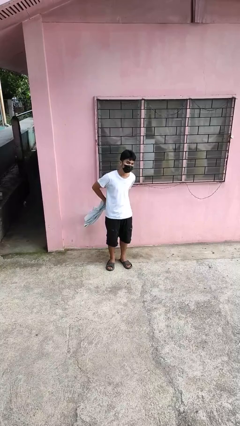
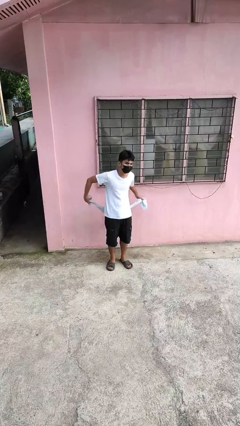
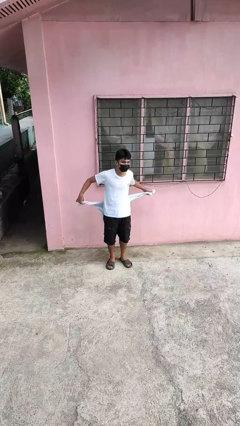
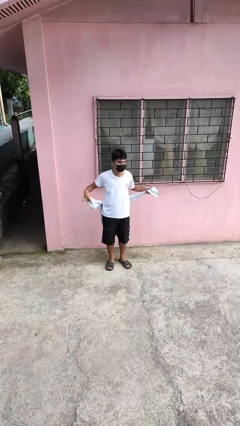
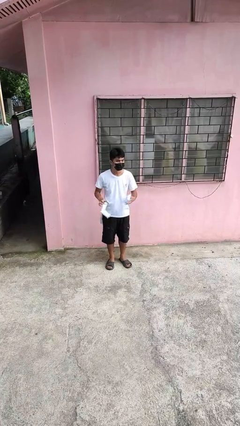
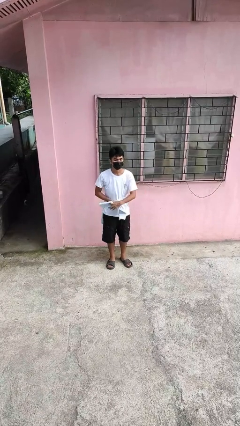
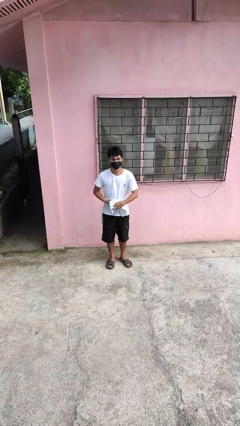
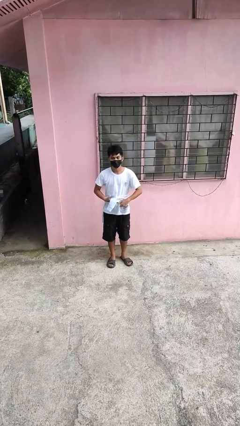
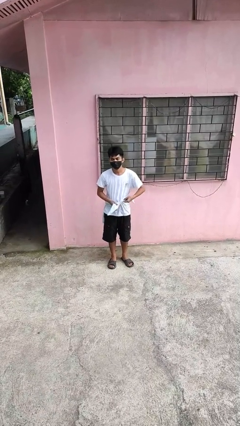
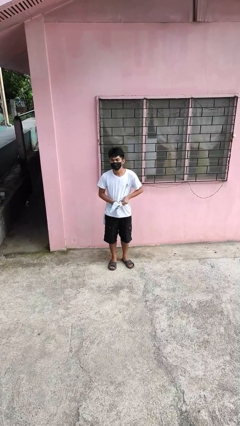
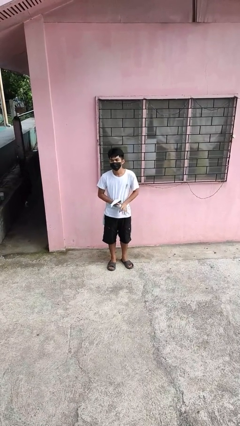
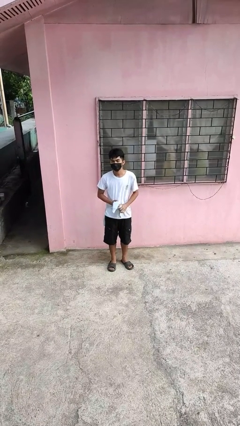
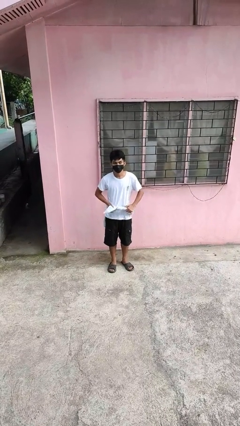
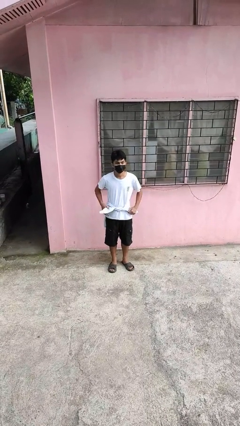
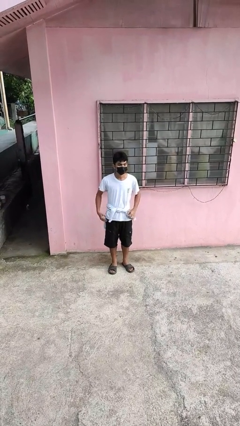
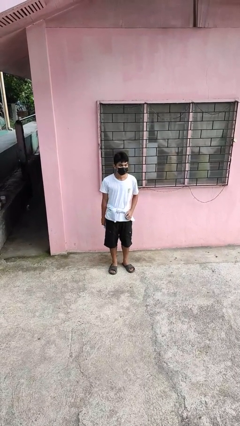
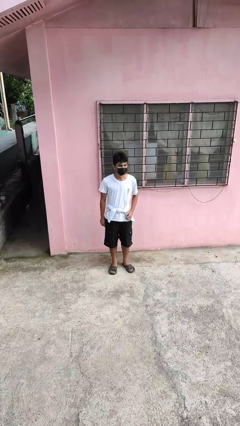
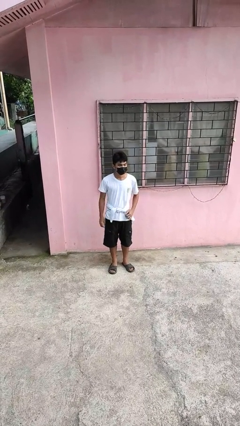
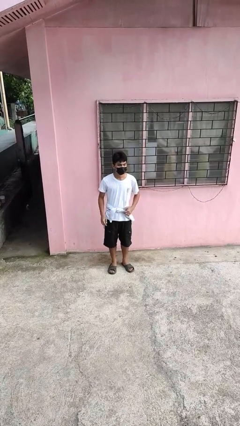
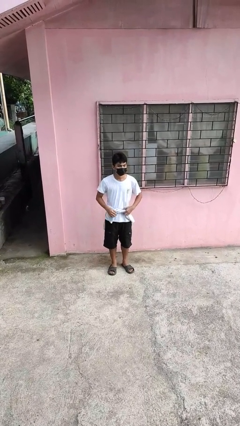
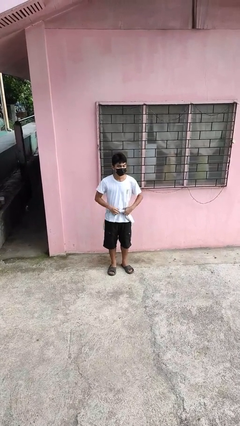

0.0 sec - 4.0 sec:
person ties jacket around waist

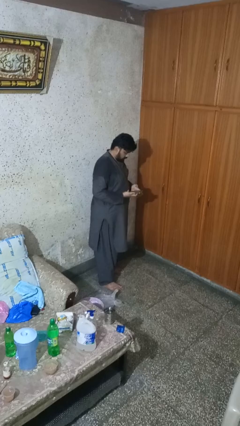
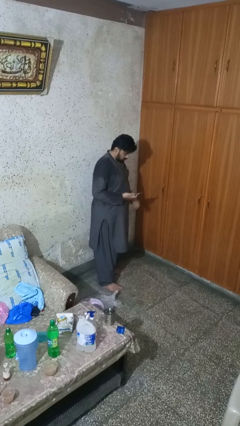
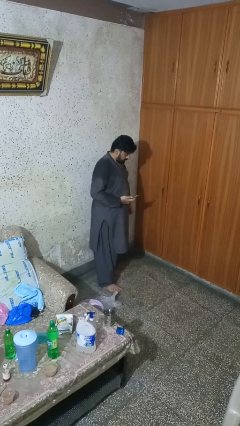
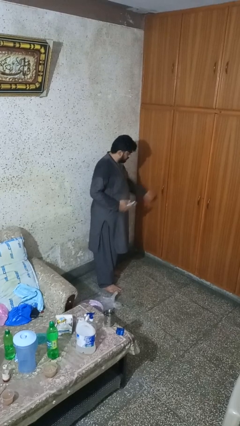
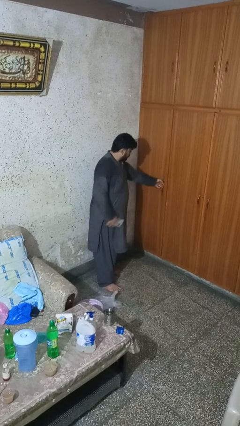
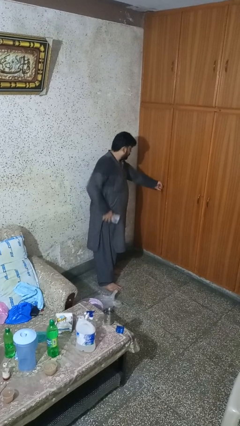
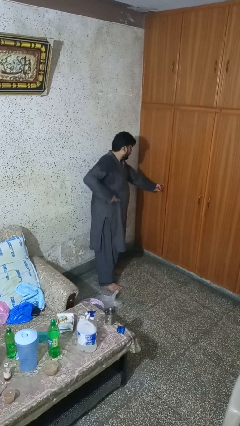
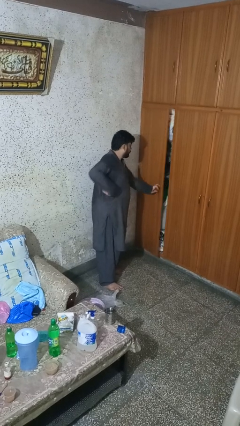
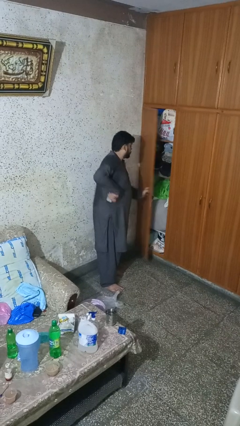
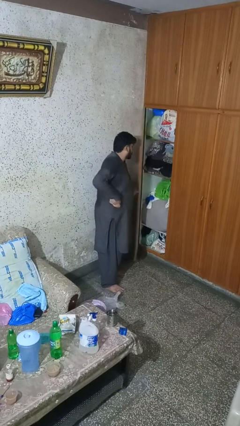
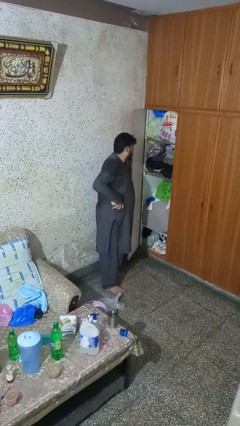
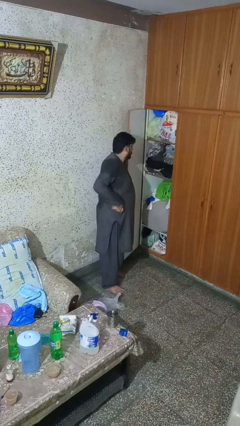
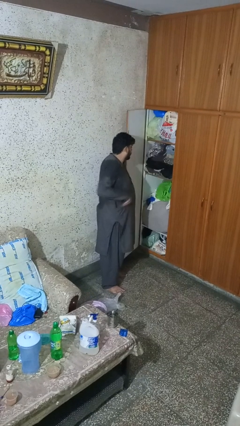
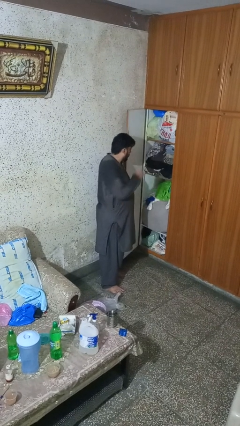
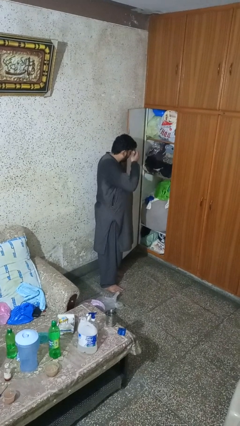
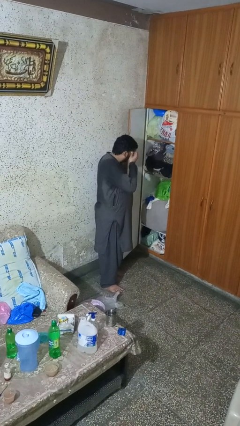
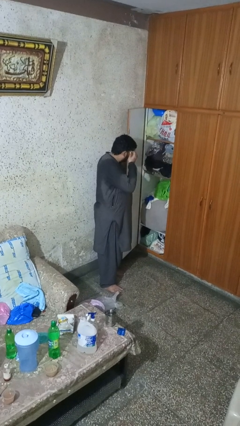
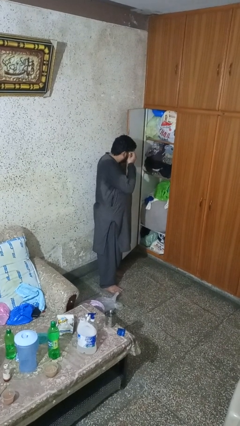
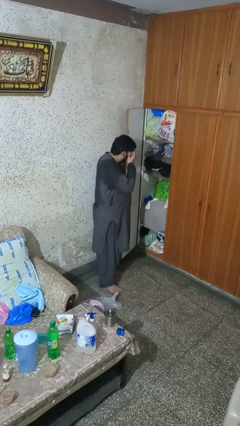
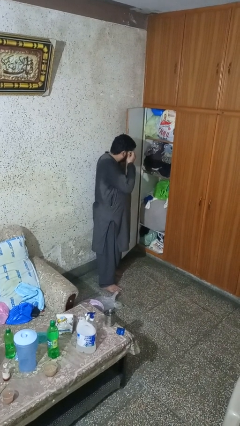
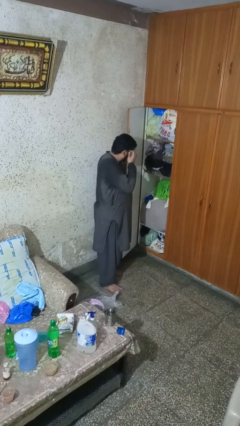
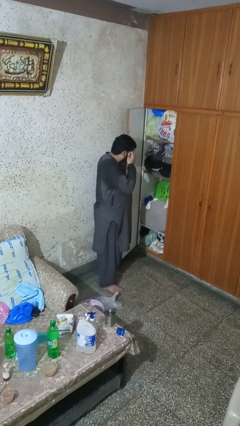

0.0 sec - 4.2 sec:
person opens closet door

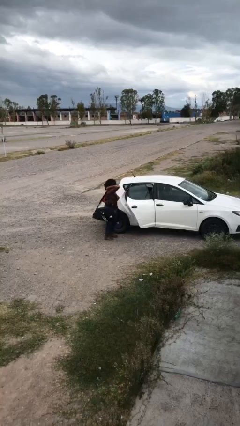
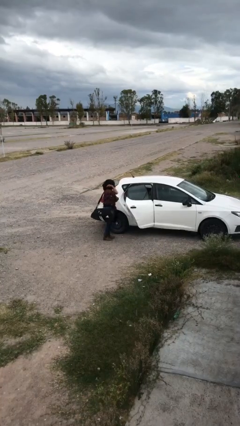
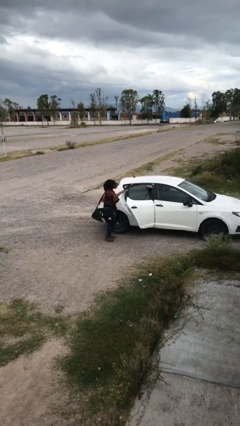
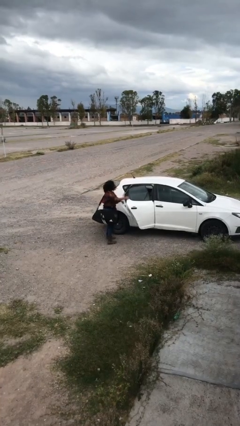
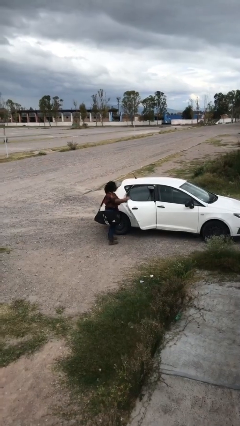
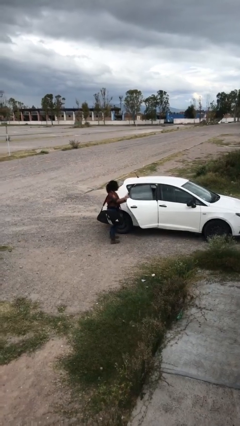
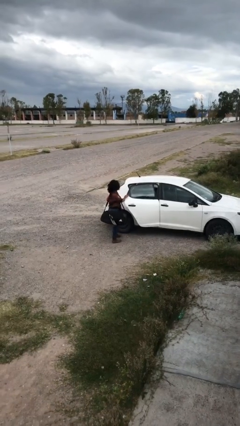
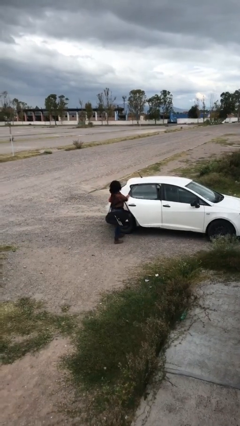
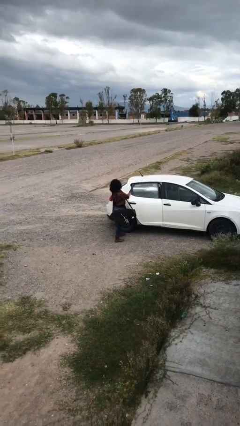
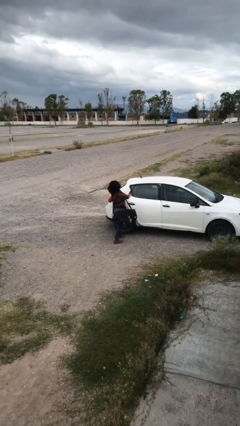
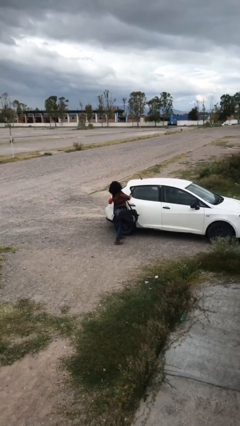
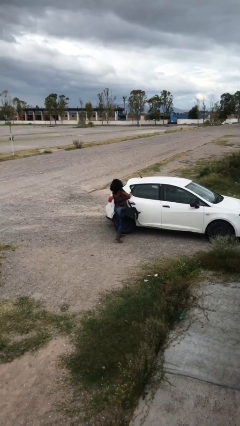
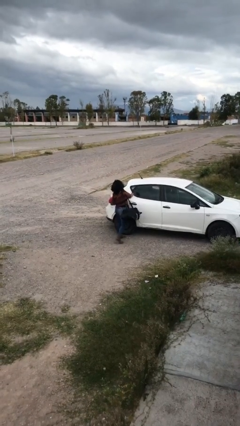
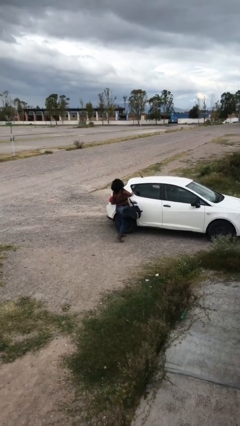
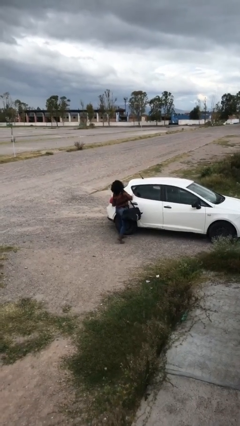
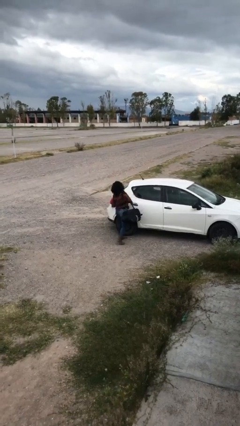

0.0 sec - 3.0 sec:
person closes car door

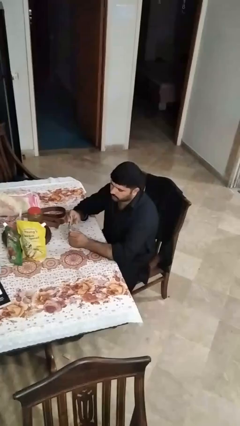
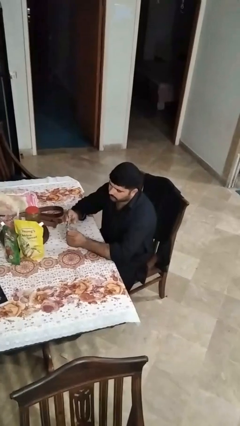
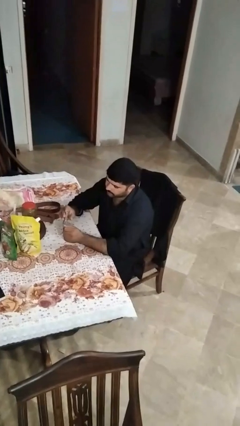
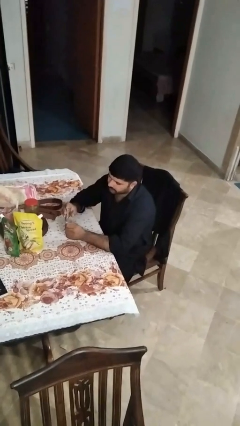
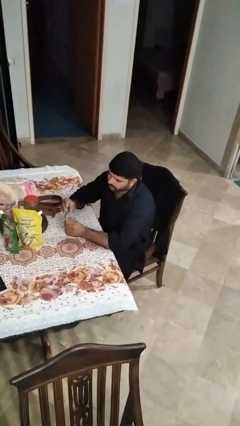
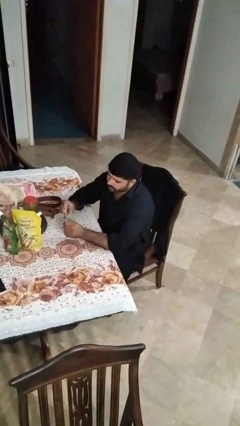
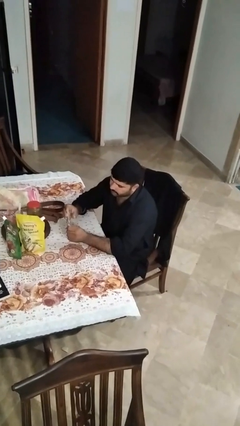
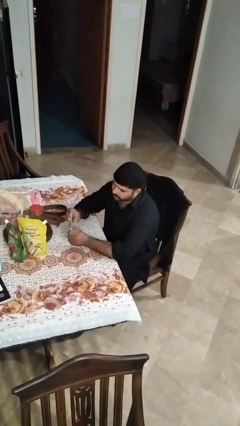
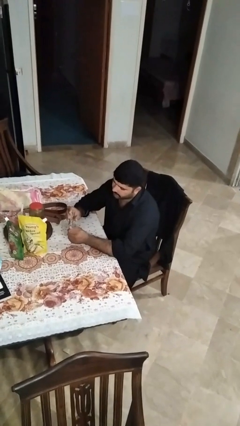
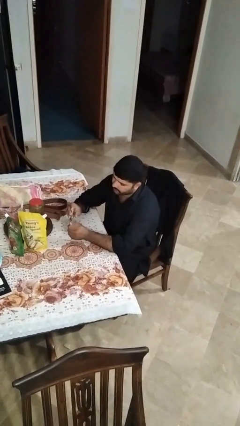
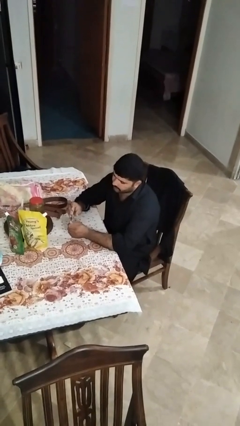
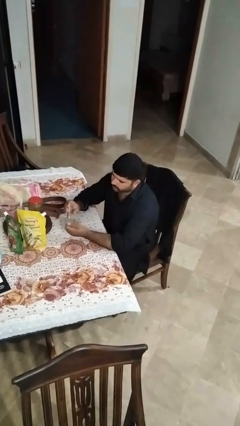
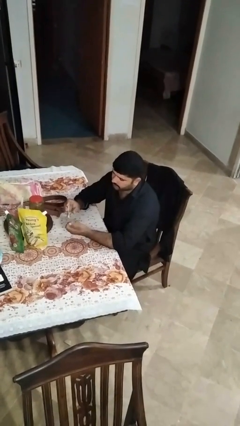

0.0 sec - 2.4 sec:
person clips fingernails

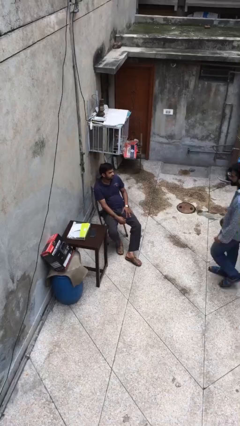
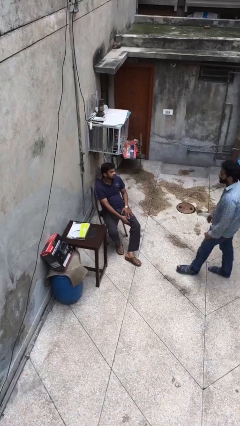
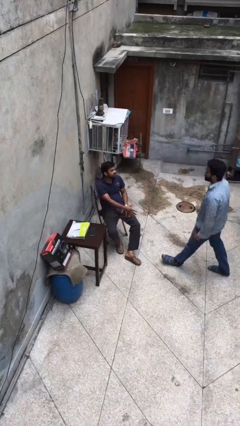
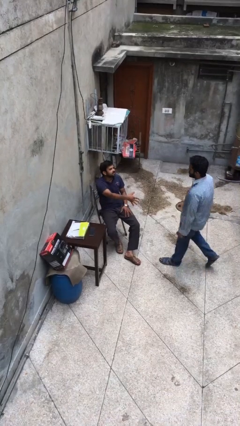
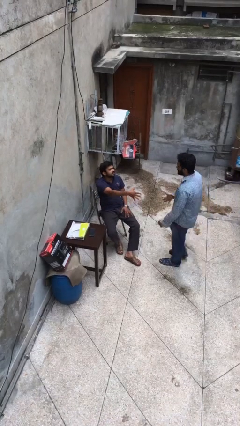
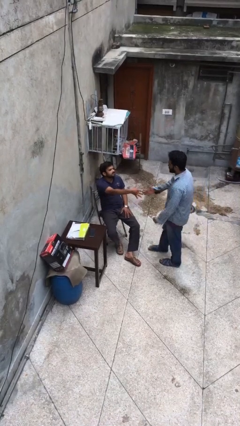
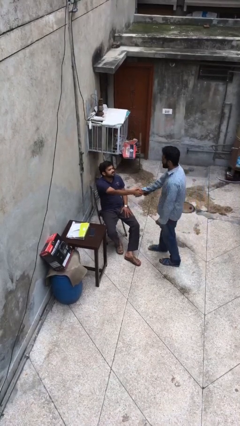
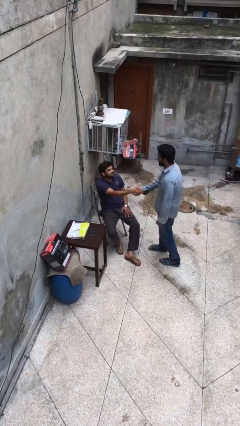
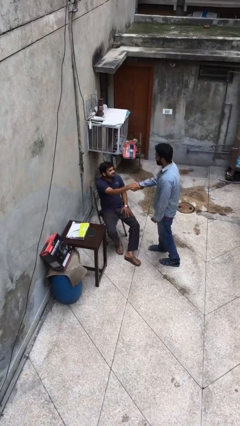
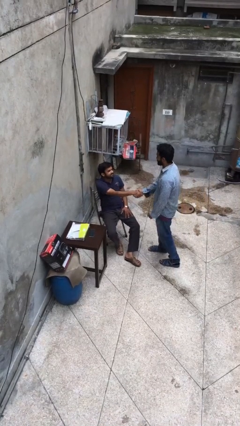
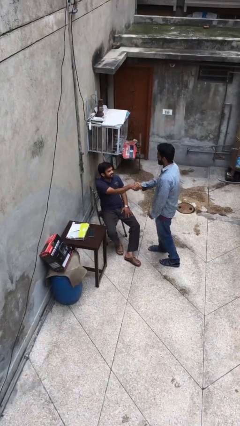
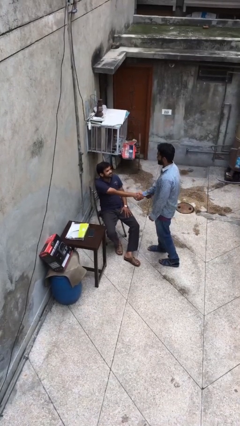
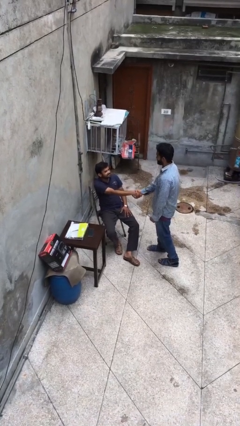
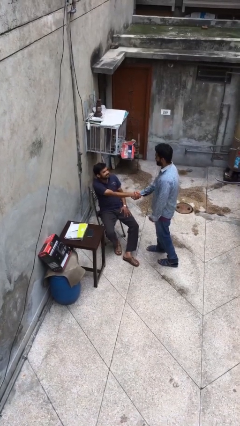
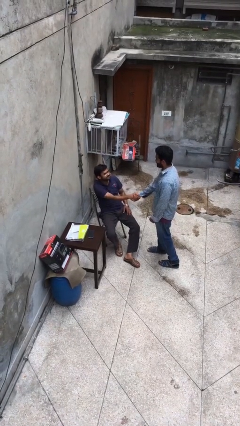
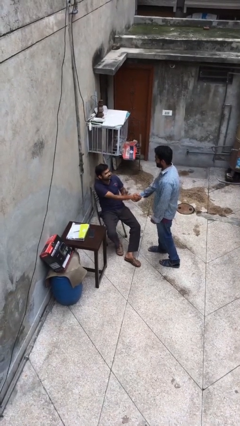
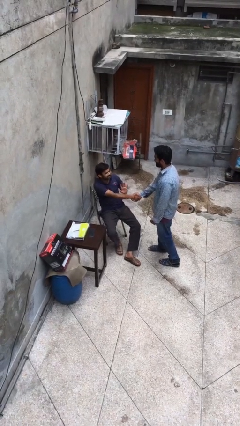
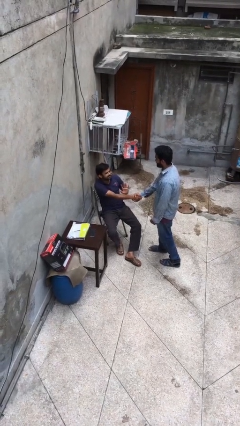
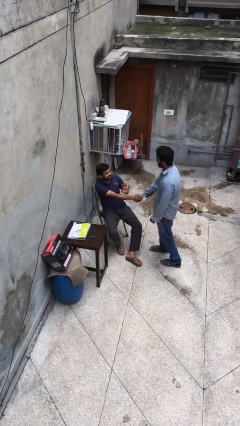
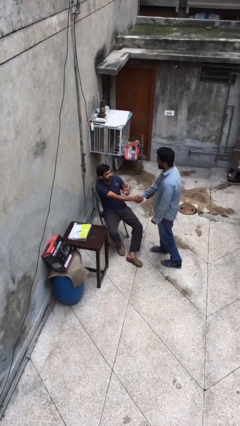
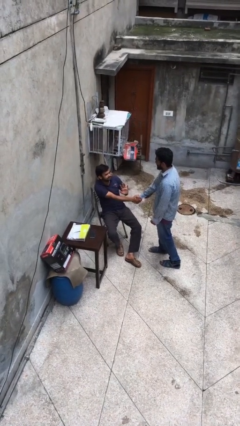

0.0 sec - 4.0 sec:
person shakes hand
